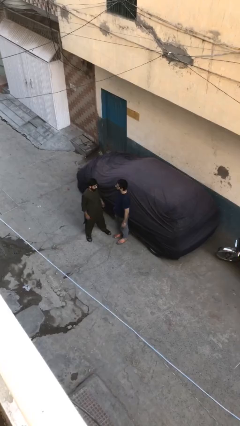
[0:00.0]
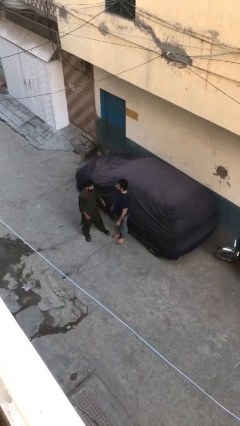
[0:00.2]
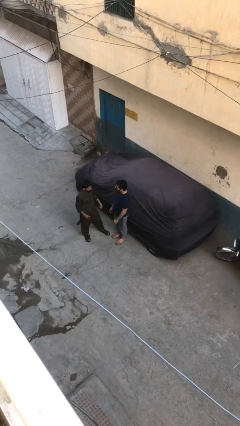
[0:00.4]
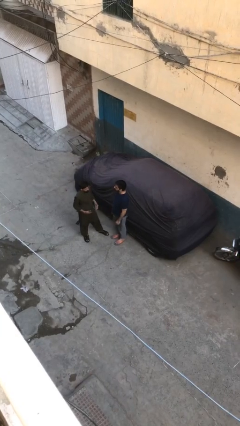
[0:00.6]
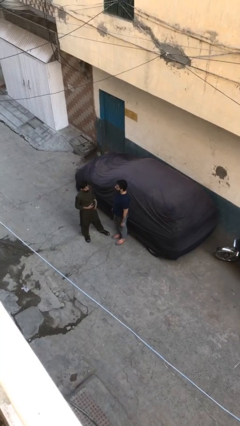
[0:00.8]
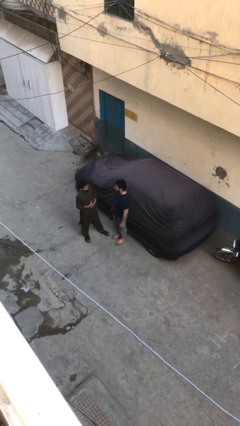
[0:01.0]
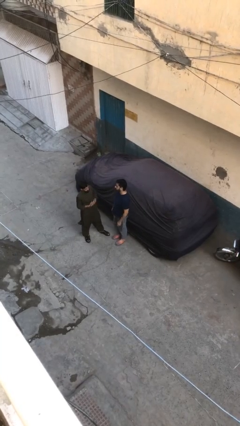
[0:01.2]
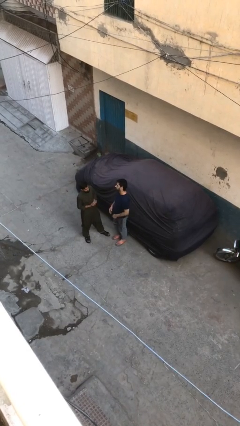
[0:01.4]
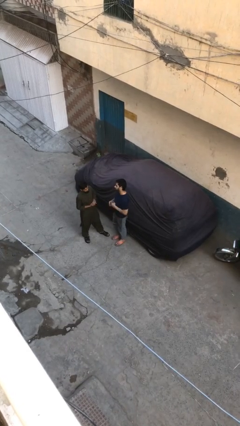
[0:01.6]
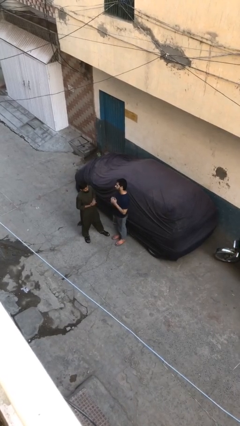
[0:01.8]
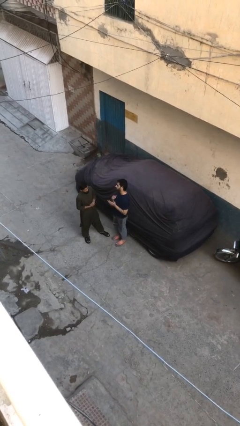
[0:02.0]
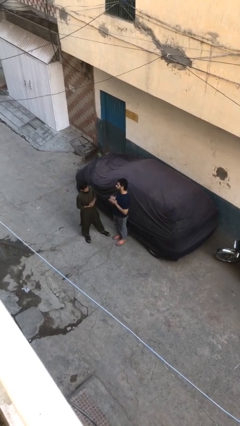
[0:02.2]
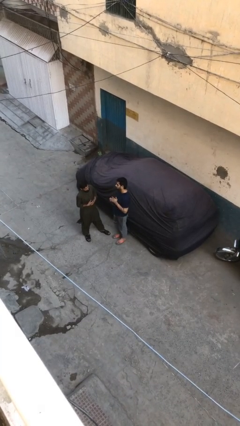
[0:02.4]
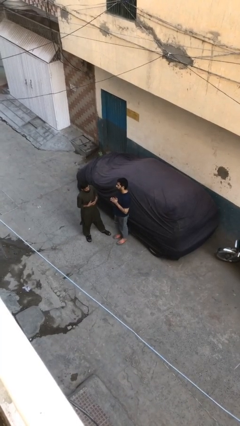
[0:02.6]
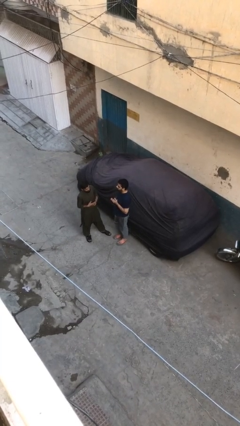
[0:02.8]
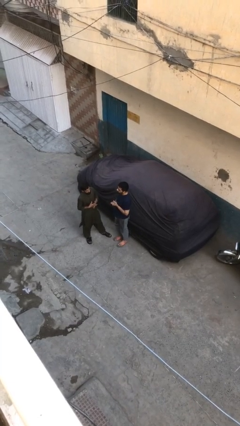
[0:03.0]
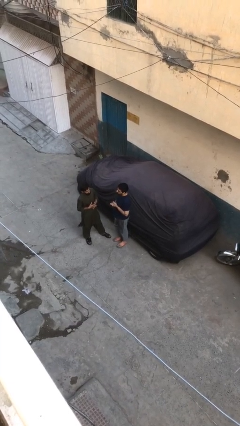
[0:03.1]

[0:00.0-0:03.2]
person talks to person

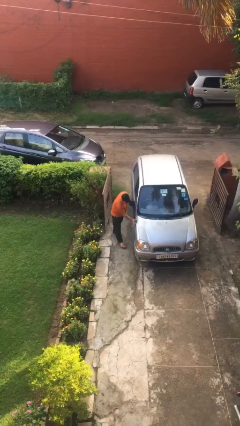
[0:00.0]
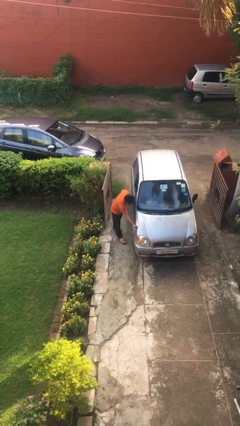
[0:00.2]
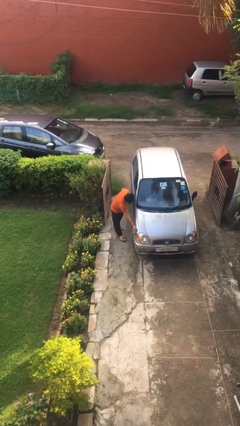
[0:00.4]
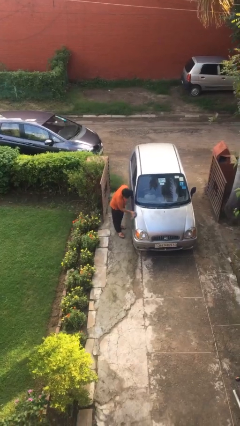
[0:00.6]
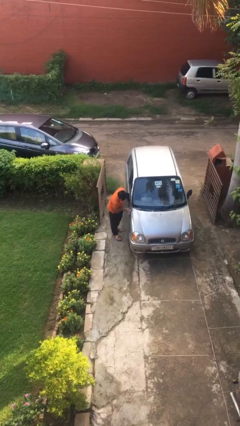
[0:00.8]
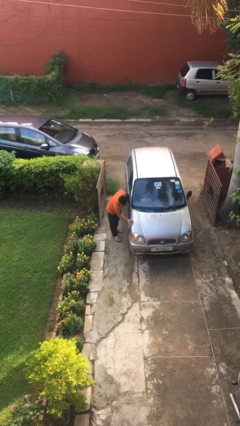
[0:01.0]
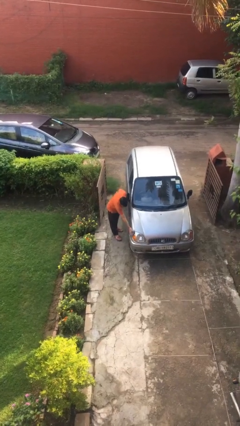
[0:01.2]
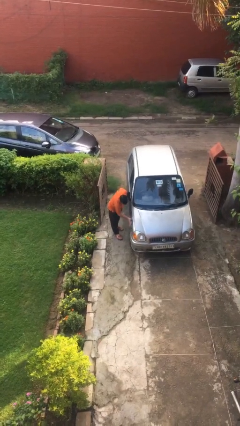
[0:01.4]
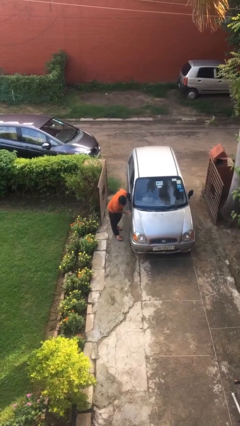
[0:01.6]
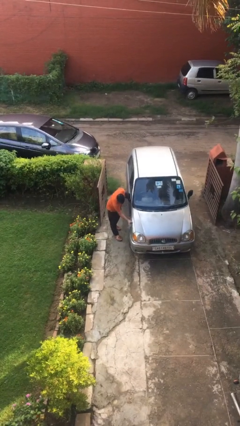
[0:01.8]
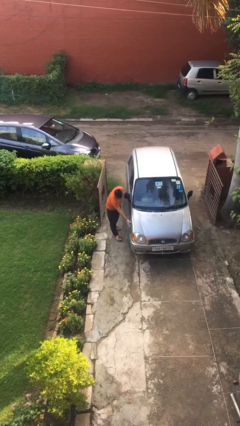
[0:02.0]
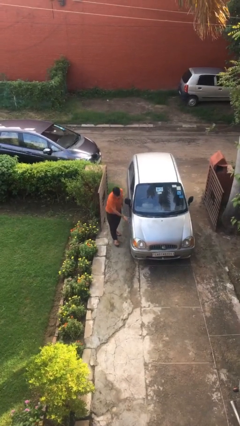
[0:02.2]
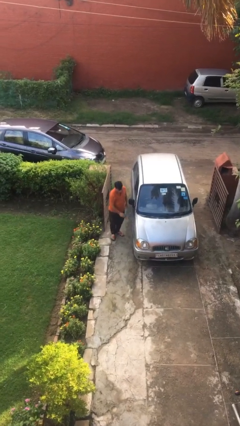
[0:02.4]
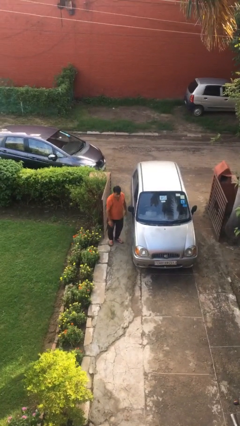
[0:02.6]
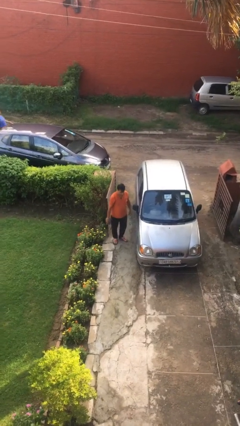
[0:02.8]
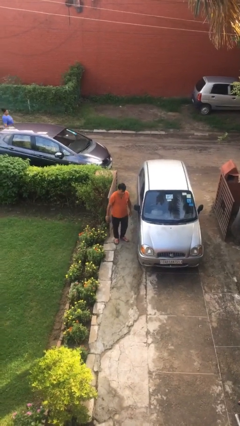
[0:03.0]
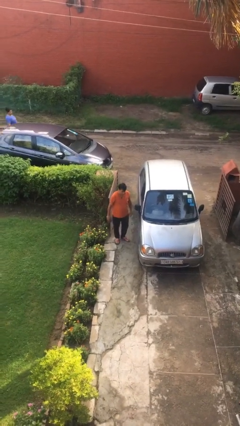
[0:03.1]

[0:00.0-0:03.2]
person polishes car with rag

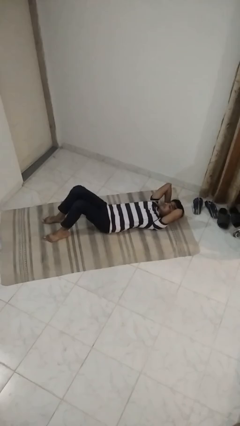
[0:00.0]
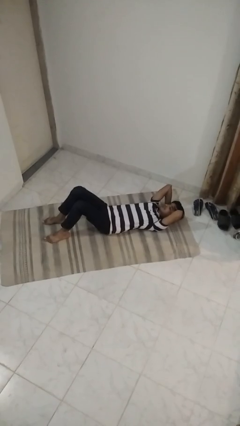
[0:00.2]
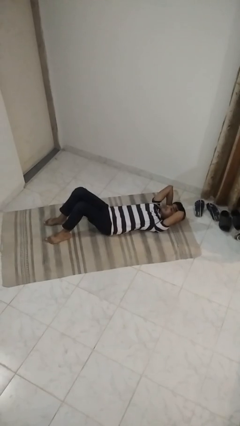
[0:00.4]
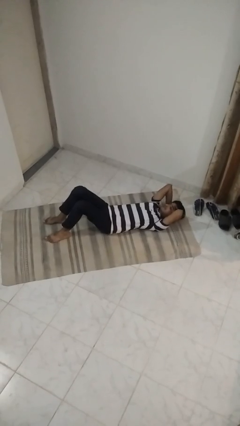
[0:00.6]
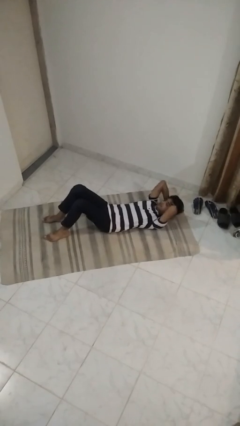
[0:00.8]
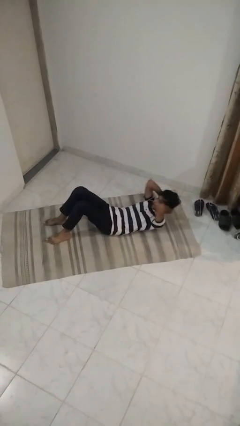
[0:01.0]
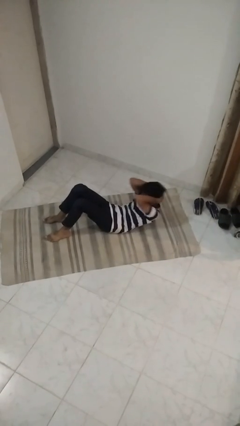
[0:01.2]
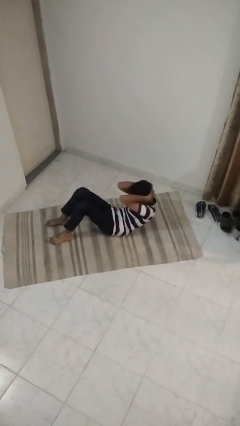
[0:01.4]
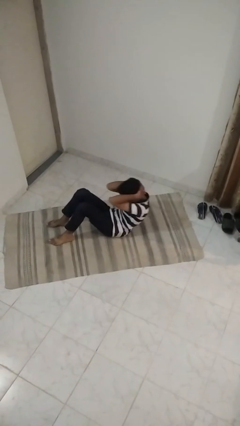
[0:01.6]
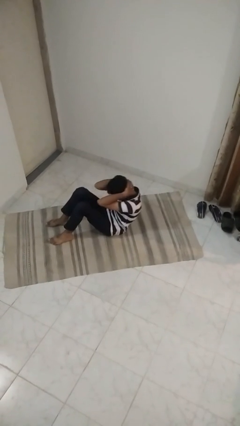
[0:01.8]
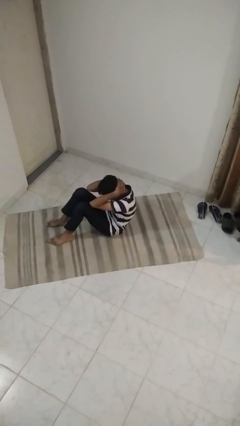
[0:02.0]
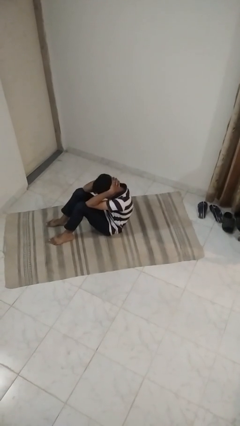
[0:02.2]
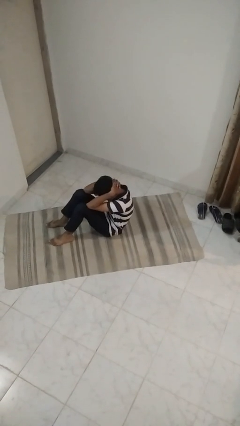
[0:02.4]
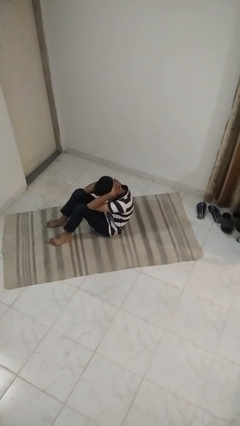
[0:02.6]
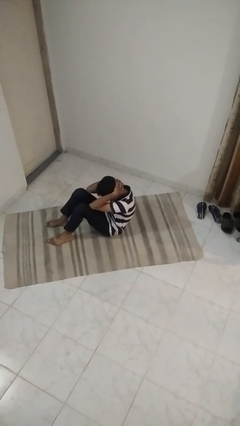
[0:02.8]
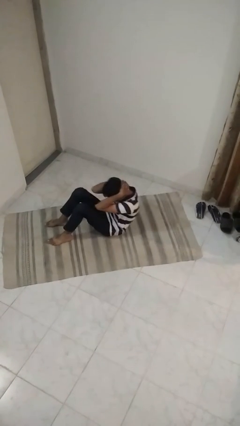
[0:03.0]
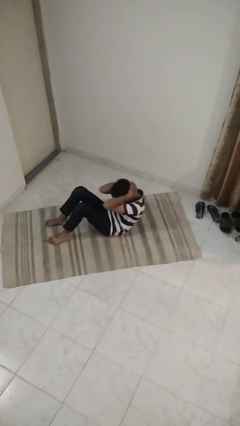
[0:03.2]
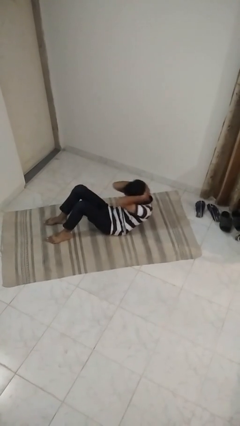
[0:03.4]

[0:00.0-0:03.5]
person exercises with situp

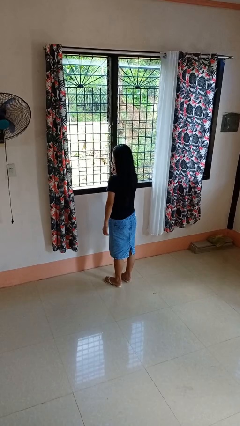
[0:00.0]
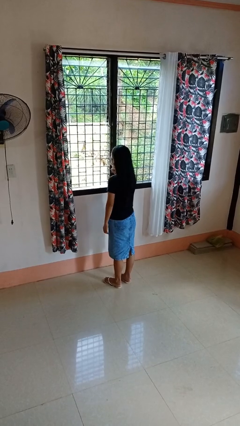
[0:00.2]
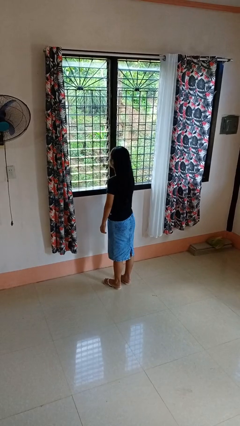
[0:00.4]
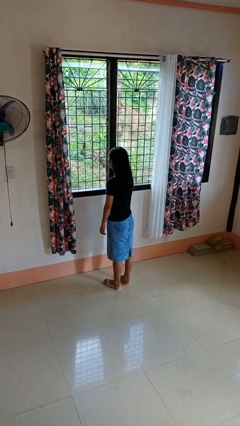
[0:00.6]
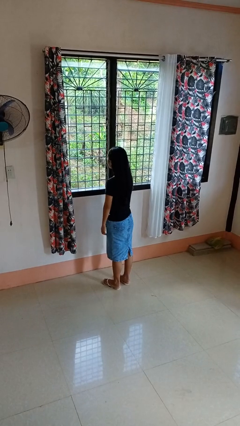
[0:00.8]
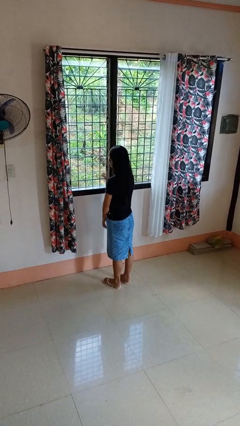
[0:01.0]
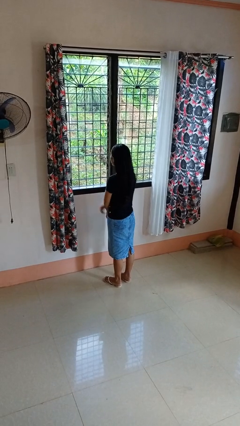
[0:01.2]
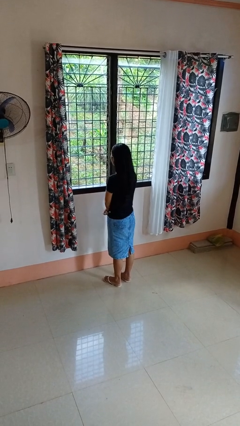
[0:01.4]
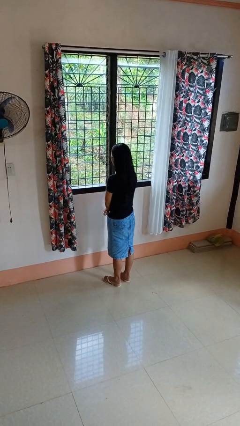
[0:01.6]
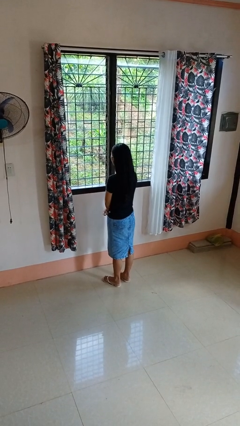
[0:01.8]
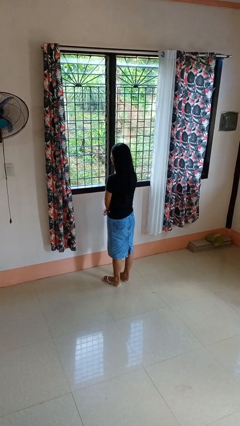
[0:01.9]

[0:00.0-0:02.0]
person closes home window

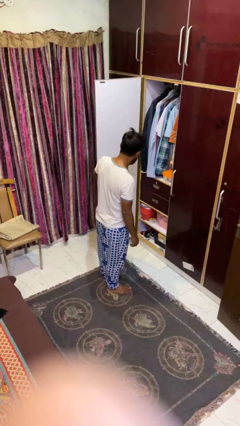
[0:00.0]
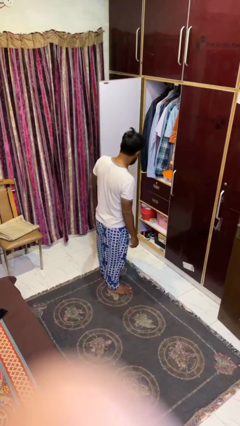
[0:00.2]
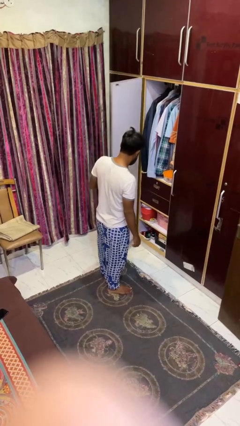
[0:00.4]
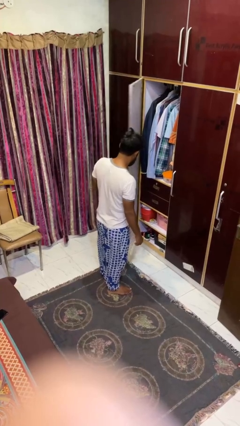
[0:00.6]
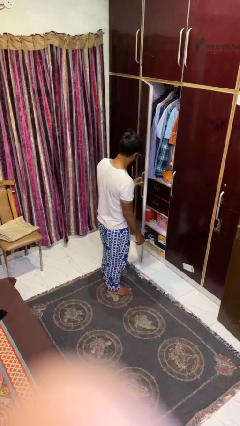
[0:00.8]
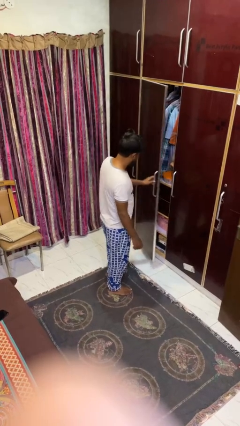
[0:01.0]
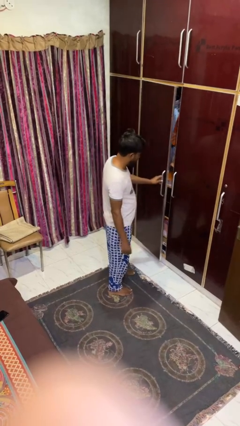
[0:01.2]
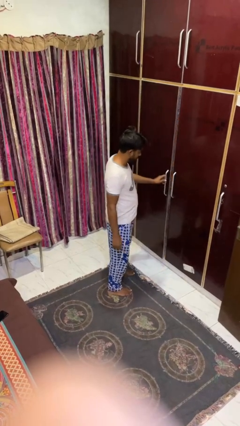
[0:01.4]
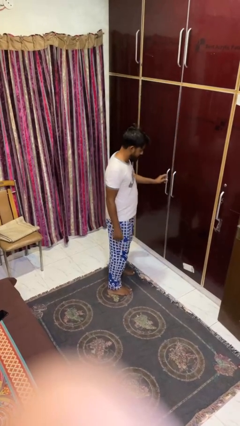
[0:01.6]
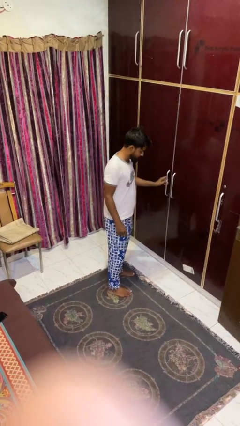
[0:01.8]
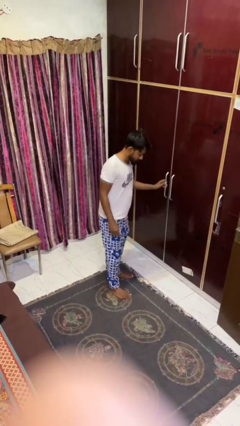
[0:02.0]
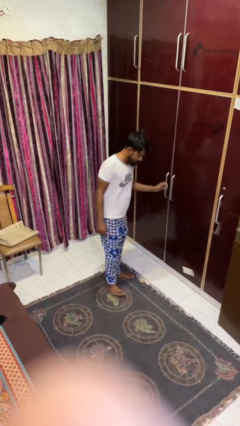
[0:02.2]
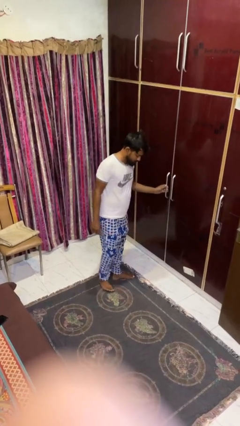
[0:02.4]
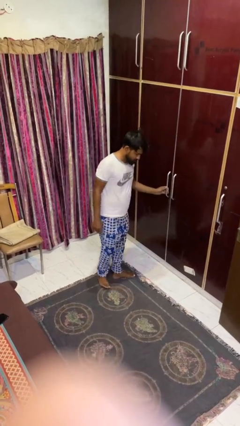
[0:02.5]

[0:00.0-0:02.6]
person closes closet door

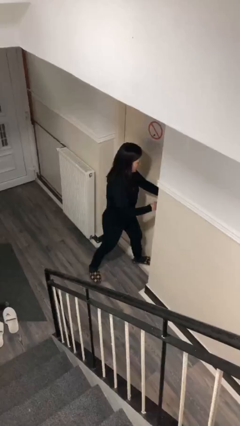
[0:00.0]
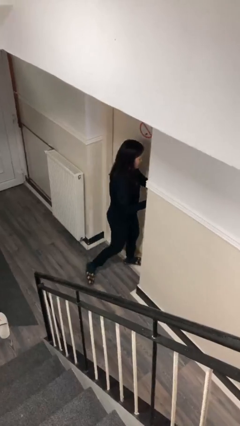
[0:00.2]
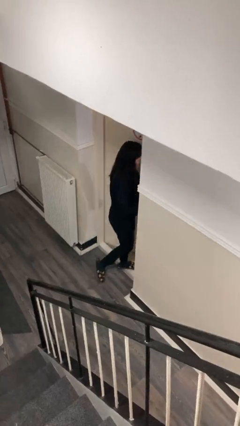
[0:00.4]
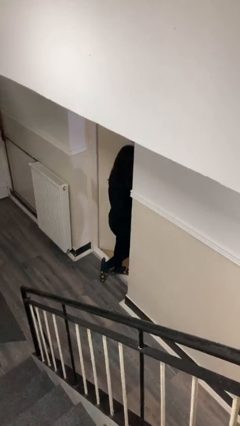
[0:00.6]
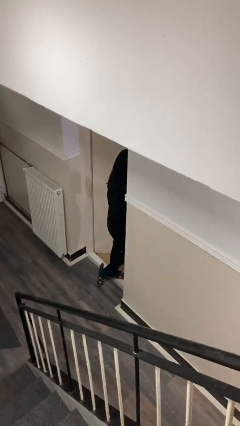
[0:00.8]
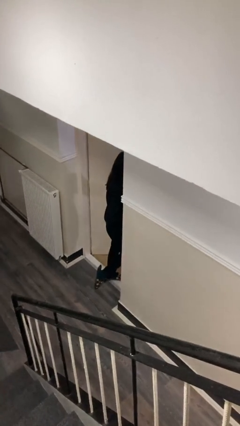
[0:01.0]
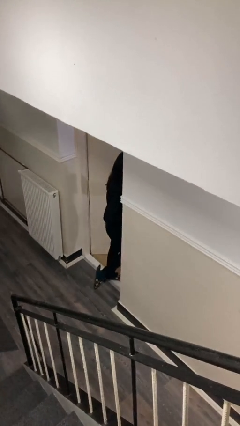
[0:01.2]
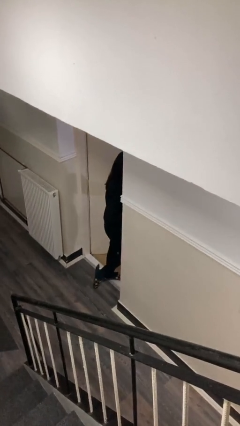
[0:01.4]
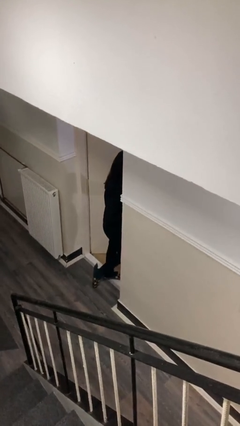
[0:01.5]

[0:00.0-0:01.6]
person opens facility door

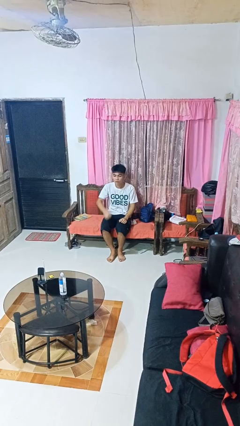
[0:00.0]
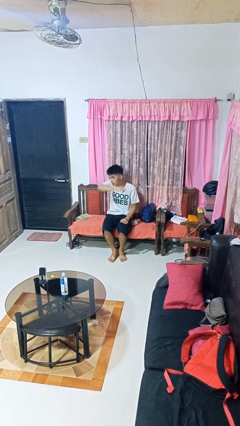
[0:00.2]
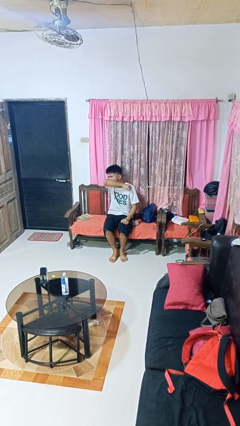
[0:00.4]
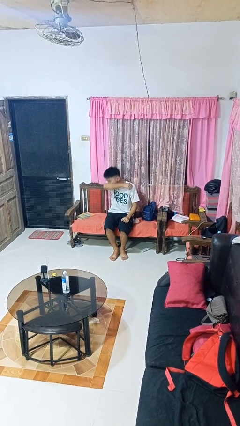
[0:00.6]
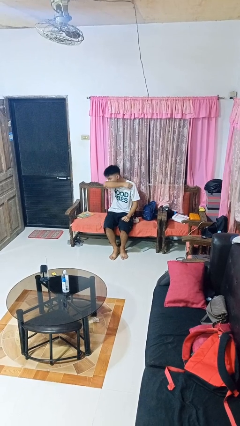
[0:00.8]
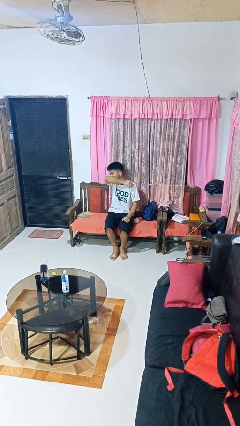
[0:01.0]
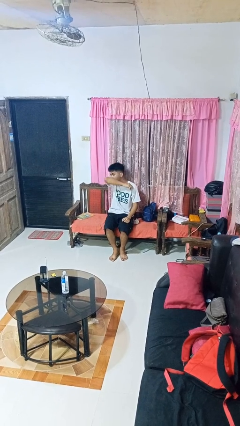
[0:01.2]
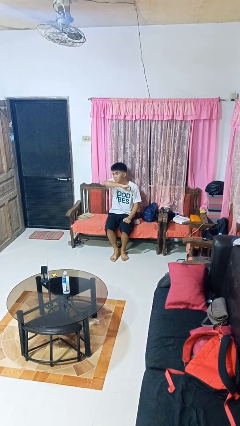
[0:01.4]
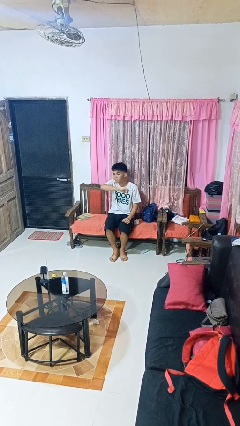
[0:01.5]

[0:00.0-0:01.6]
person sneezes into arm
